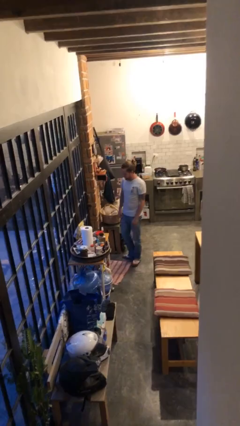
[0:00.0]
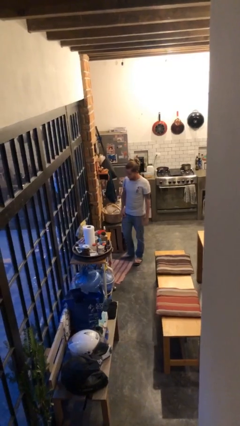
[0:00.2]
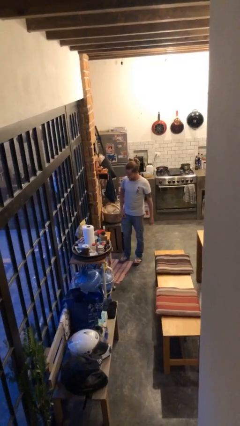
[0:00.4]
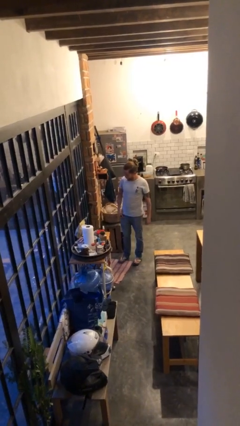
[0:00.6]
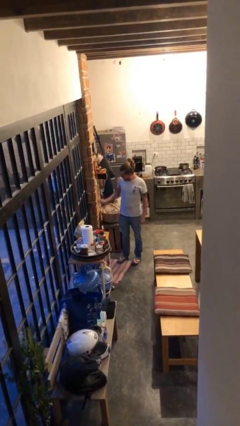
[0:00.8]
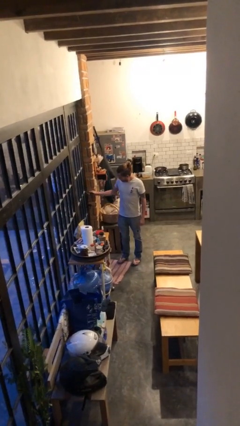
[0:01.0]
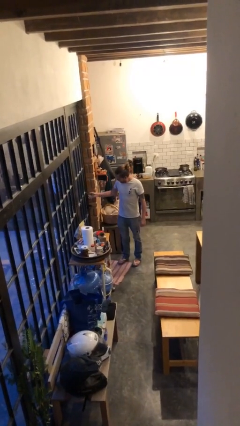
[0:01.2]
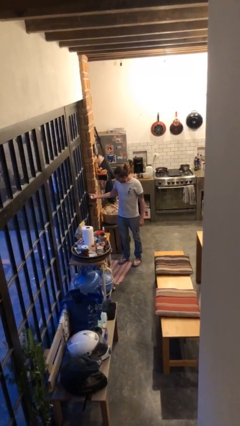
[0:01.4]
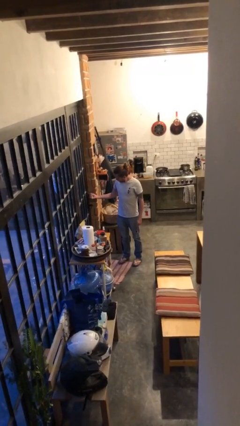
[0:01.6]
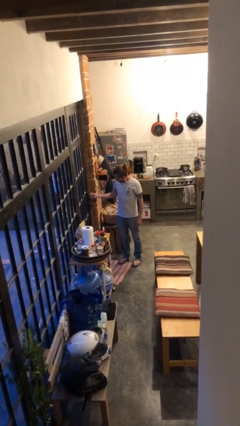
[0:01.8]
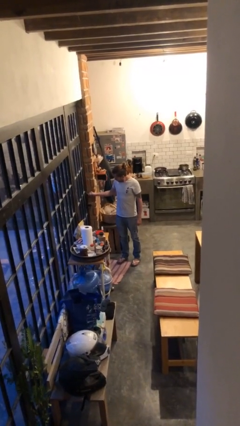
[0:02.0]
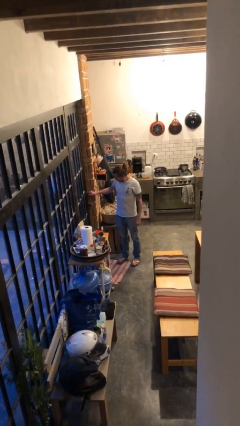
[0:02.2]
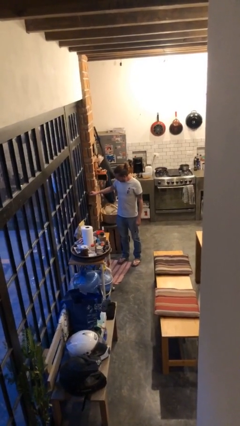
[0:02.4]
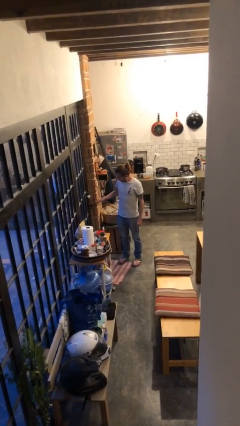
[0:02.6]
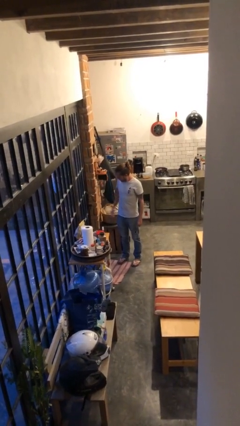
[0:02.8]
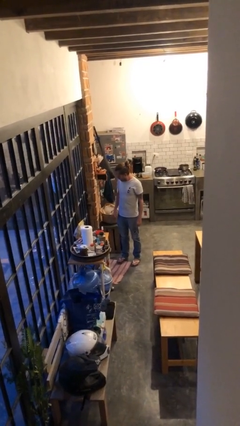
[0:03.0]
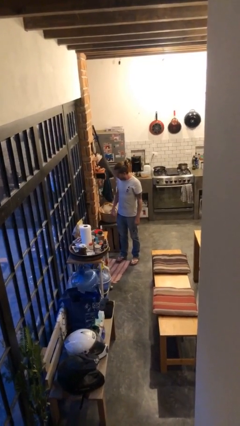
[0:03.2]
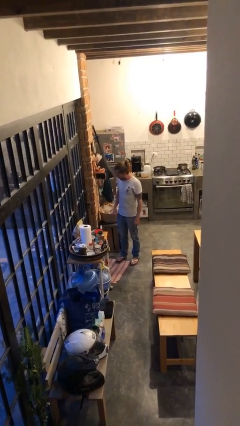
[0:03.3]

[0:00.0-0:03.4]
person unlocks door with keys

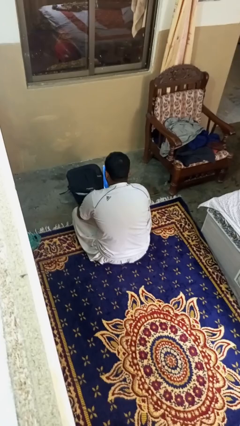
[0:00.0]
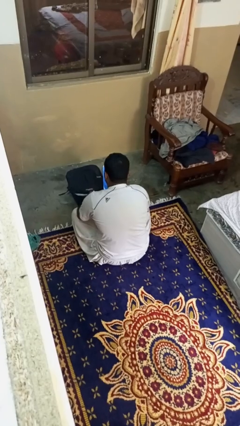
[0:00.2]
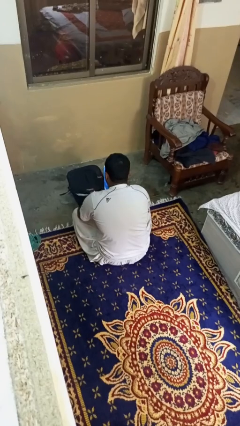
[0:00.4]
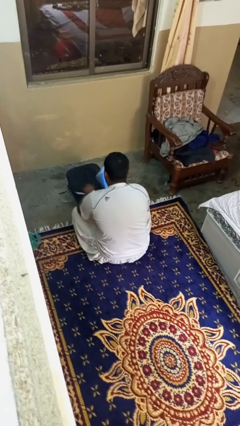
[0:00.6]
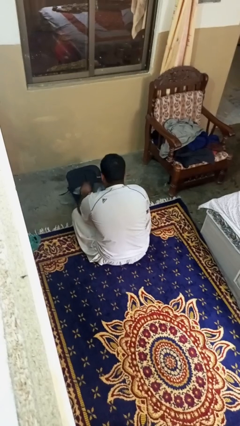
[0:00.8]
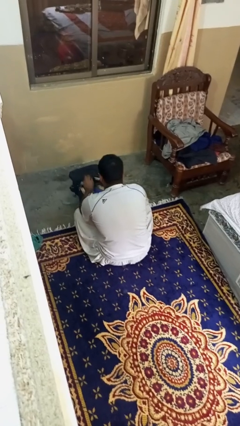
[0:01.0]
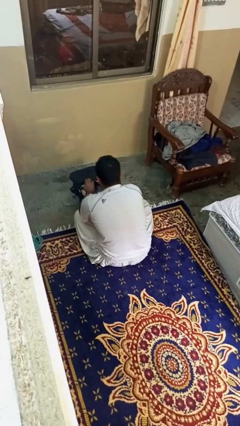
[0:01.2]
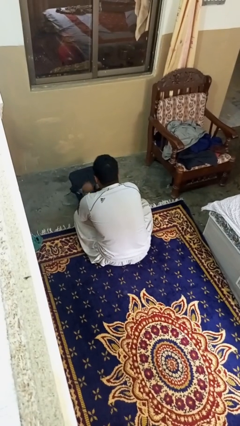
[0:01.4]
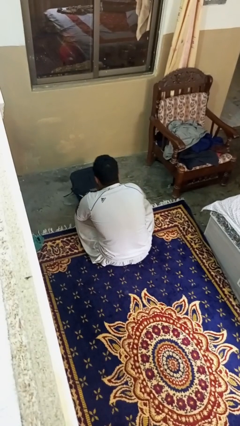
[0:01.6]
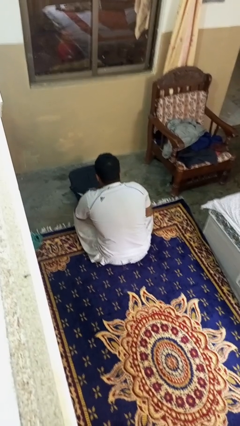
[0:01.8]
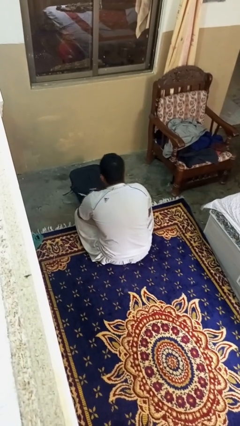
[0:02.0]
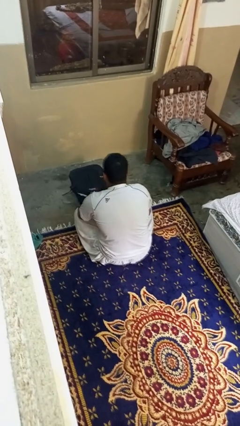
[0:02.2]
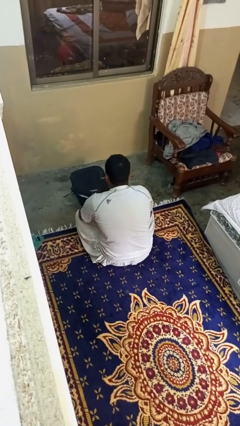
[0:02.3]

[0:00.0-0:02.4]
person puts object into bag

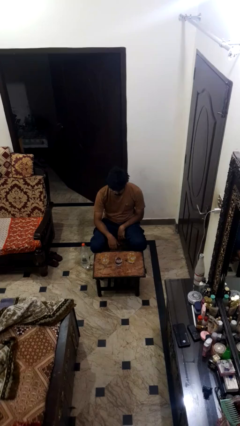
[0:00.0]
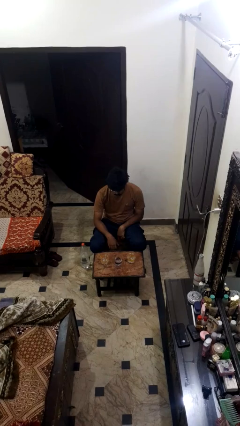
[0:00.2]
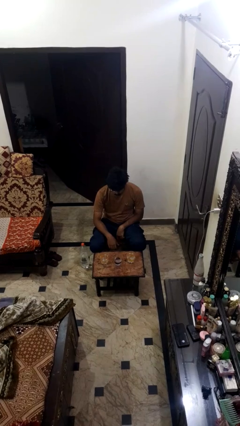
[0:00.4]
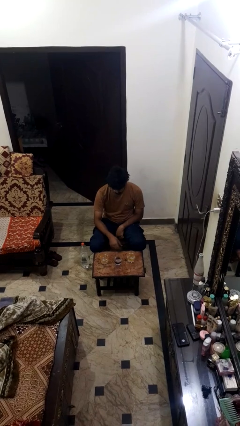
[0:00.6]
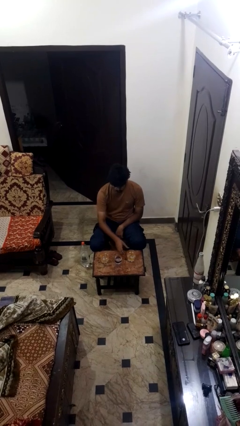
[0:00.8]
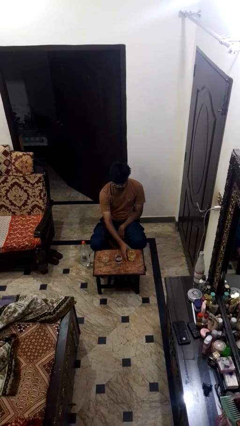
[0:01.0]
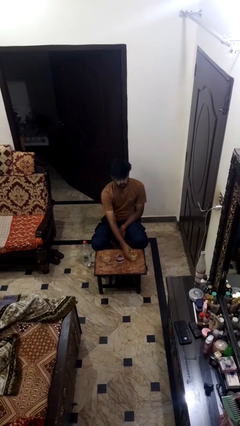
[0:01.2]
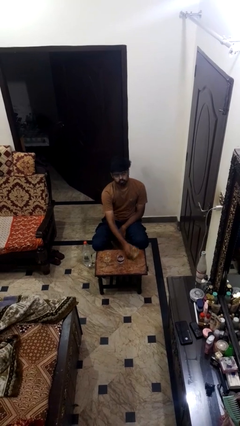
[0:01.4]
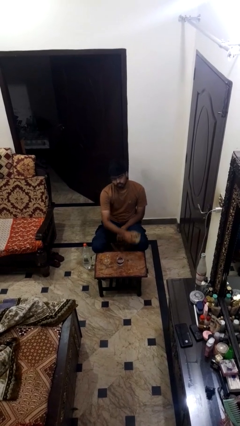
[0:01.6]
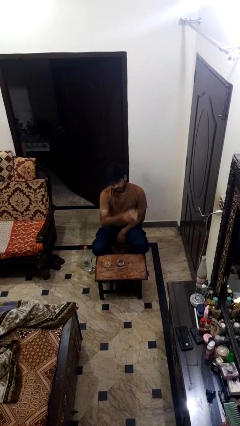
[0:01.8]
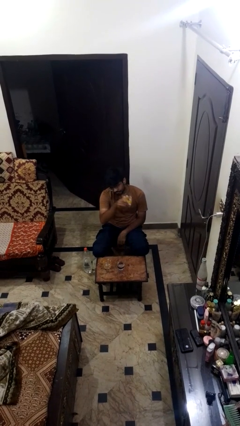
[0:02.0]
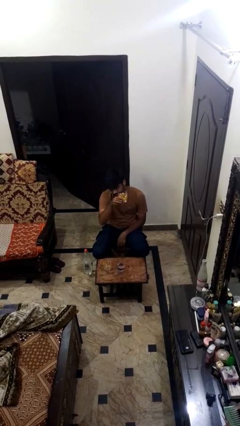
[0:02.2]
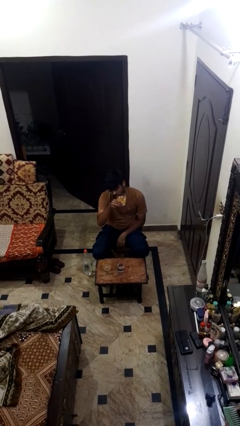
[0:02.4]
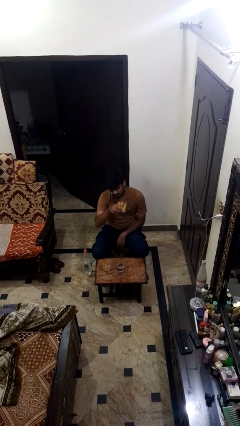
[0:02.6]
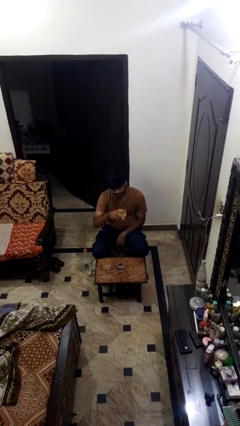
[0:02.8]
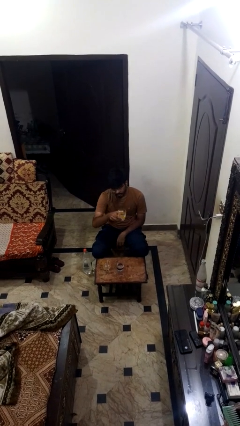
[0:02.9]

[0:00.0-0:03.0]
person picks up object from table

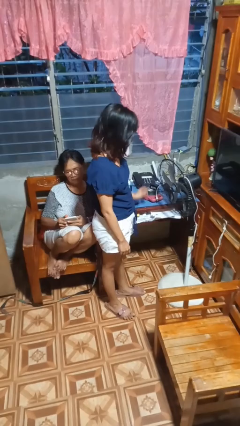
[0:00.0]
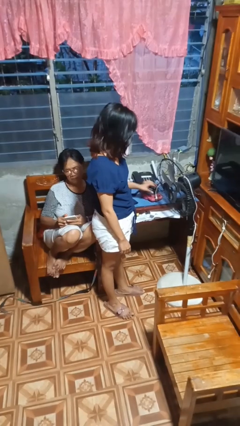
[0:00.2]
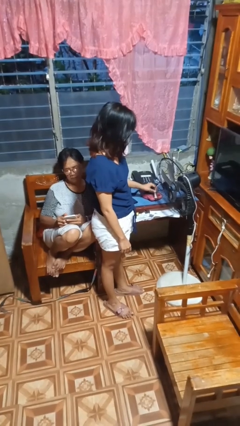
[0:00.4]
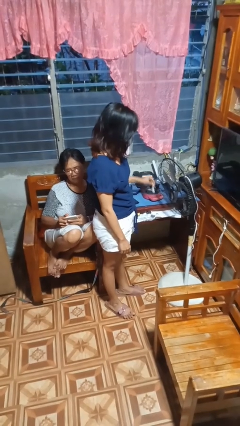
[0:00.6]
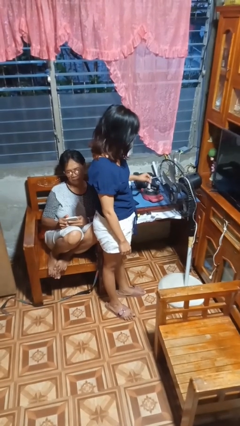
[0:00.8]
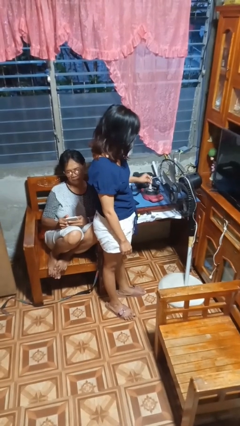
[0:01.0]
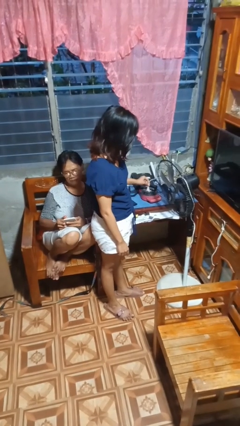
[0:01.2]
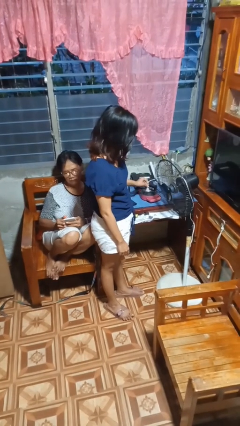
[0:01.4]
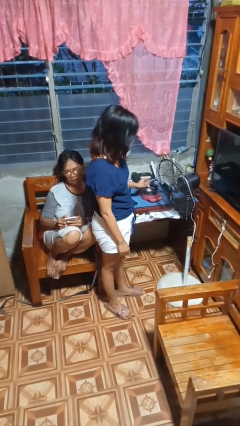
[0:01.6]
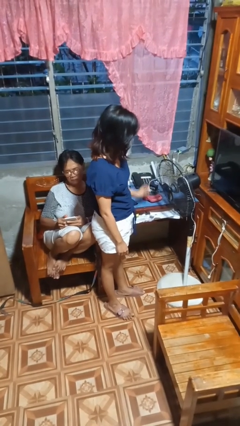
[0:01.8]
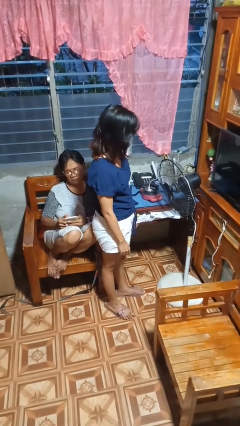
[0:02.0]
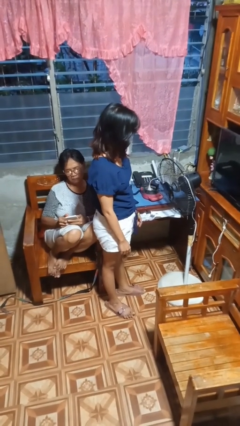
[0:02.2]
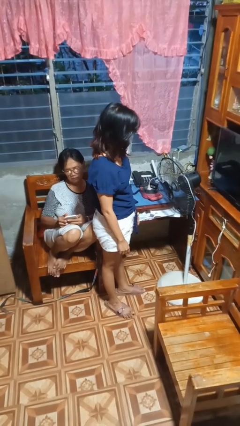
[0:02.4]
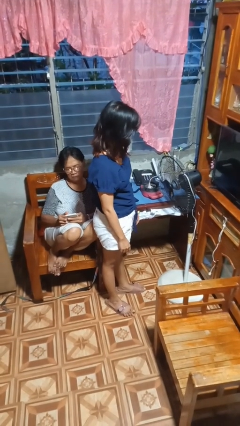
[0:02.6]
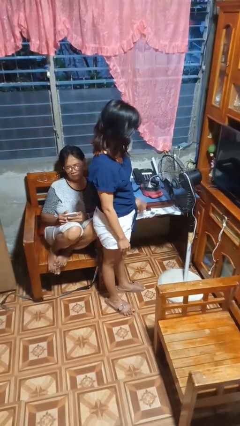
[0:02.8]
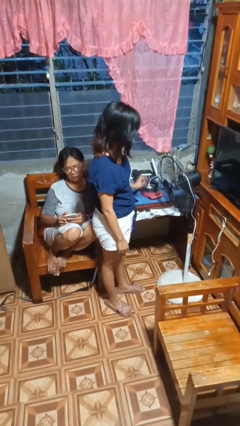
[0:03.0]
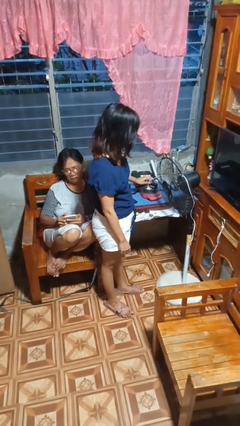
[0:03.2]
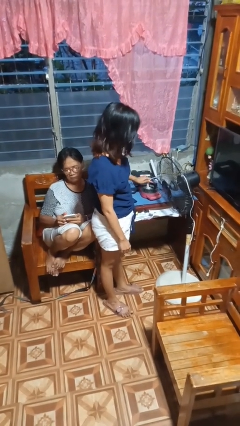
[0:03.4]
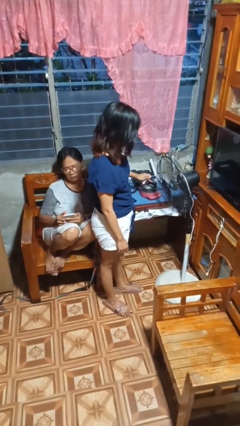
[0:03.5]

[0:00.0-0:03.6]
person plugs into electrical socket

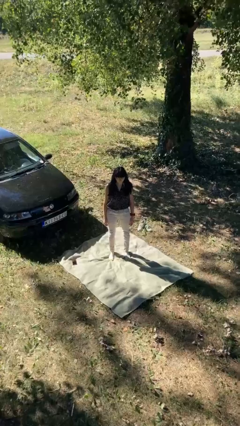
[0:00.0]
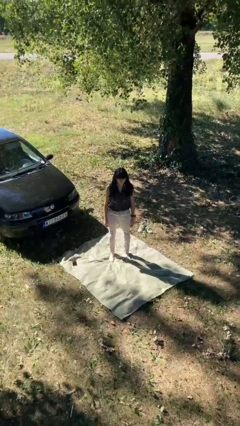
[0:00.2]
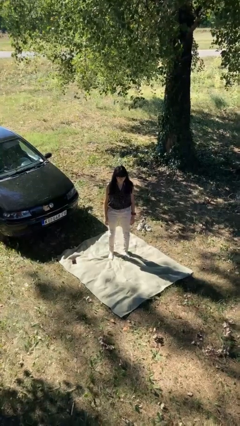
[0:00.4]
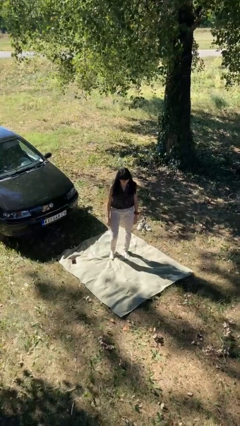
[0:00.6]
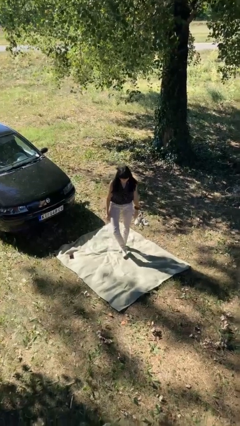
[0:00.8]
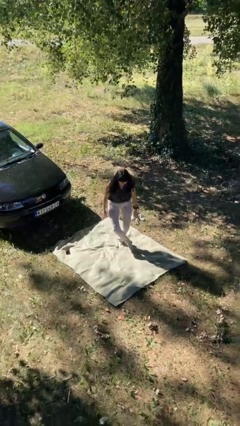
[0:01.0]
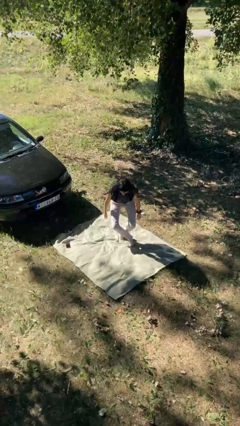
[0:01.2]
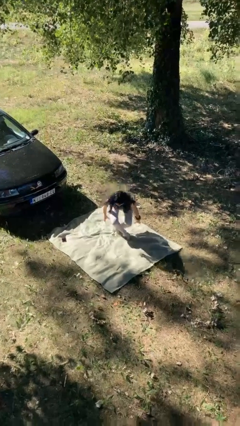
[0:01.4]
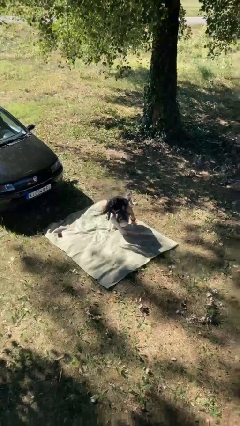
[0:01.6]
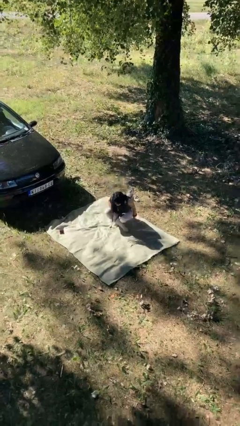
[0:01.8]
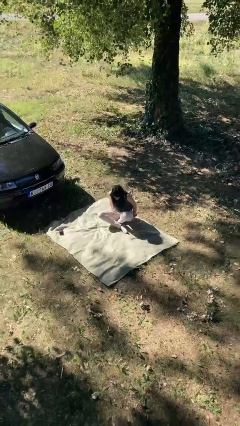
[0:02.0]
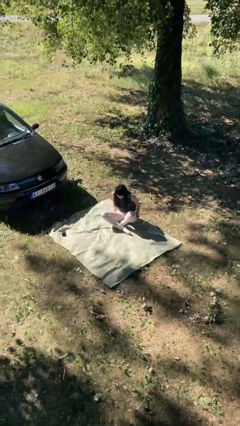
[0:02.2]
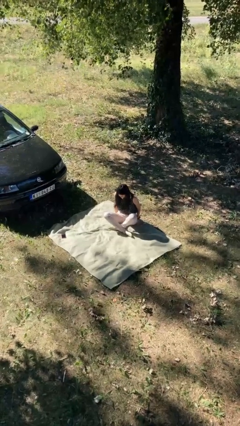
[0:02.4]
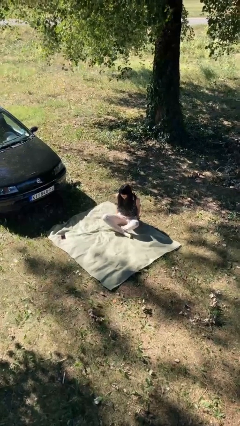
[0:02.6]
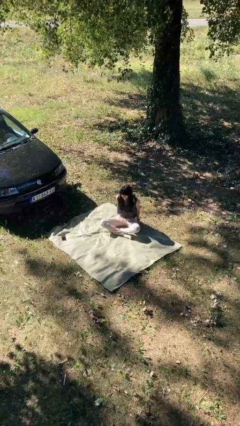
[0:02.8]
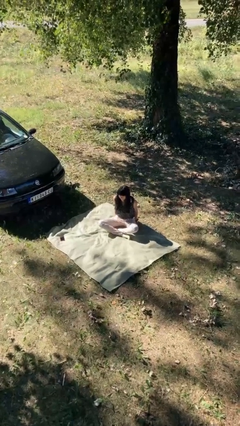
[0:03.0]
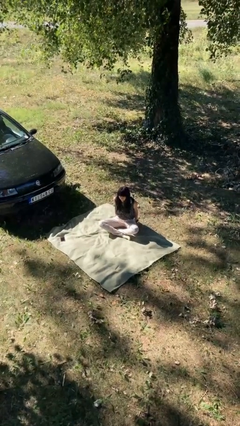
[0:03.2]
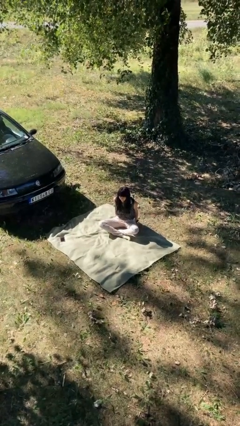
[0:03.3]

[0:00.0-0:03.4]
person sits crisscross

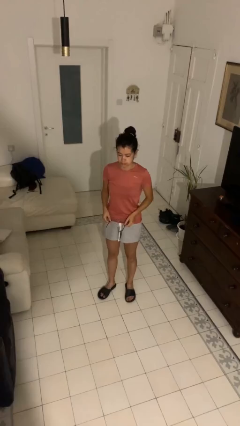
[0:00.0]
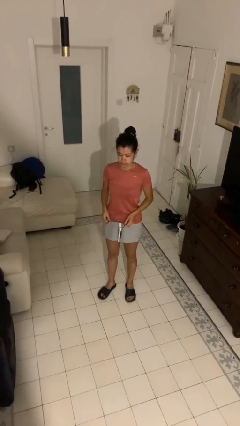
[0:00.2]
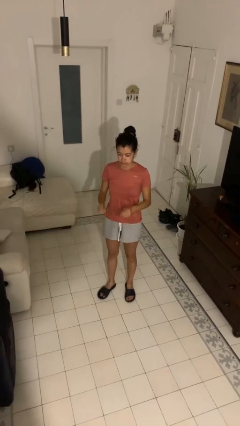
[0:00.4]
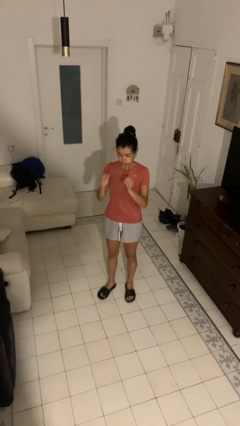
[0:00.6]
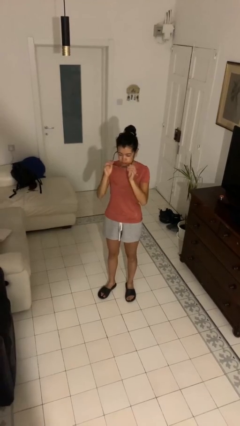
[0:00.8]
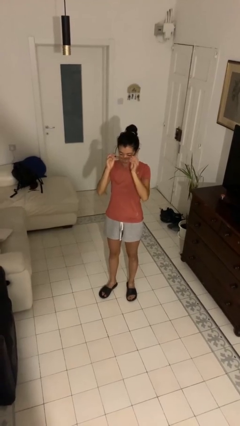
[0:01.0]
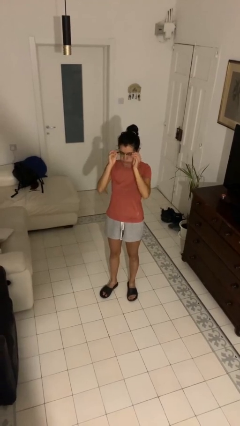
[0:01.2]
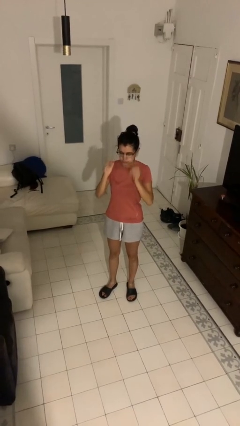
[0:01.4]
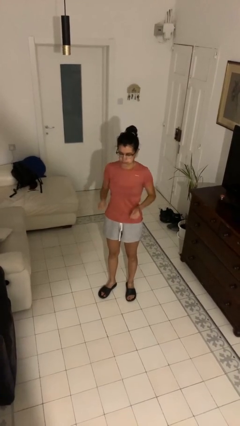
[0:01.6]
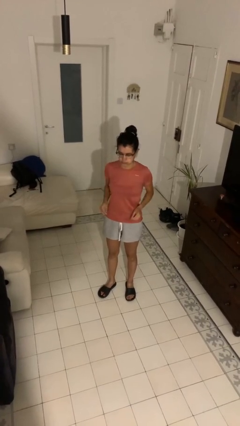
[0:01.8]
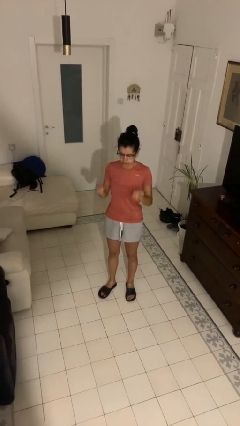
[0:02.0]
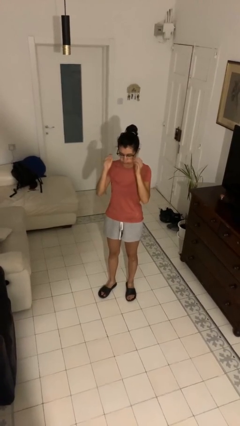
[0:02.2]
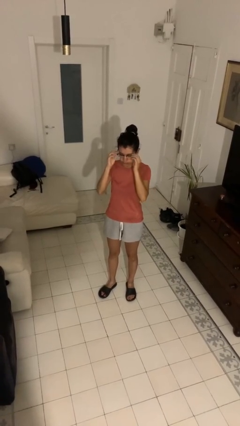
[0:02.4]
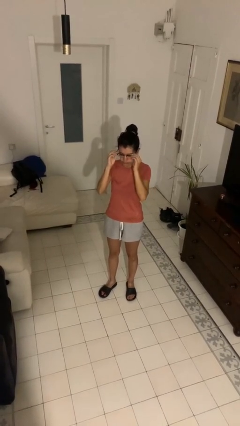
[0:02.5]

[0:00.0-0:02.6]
person puts on glasses
